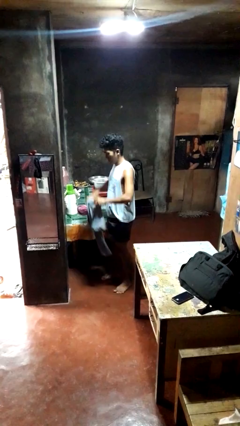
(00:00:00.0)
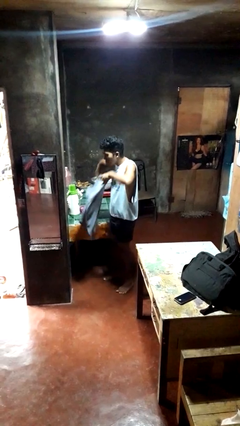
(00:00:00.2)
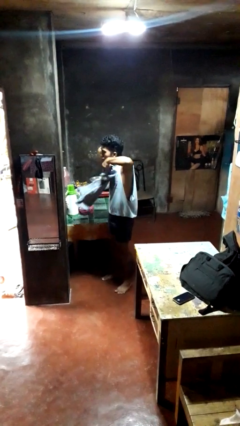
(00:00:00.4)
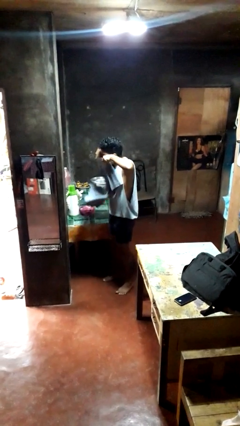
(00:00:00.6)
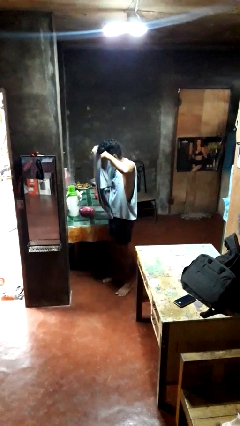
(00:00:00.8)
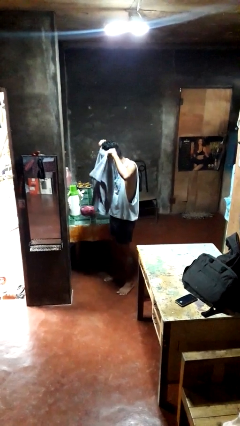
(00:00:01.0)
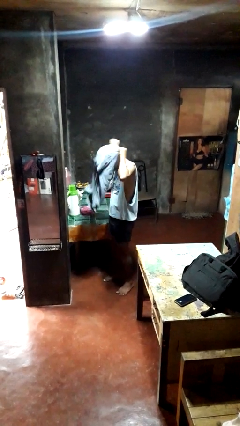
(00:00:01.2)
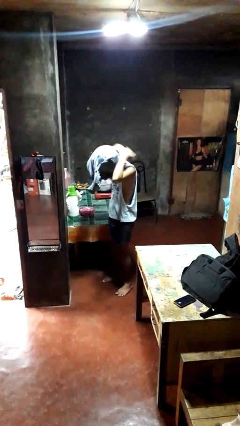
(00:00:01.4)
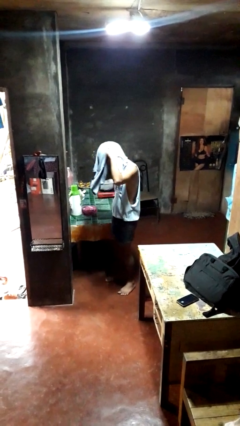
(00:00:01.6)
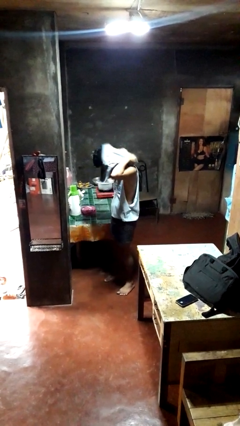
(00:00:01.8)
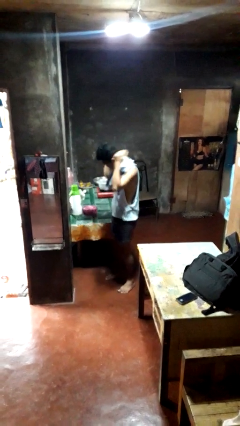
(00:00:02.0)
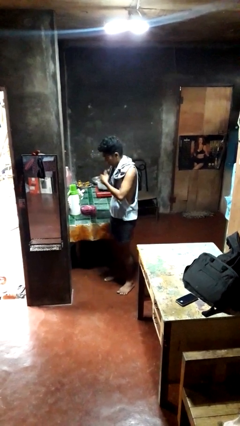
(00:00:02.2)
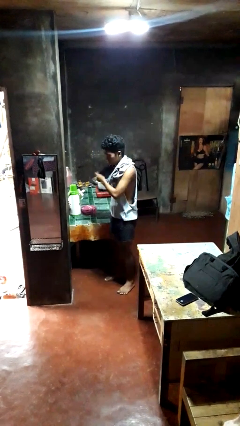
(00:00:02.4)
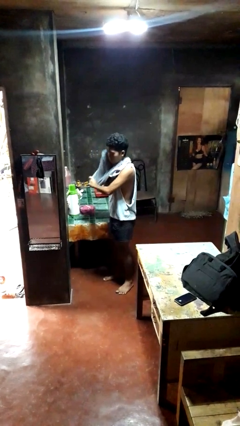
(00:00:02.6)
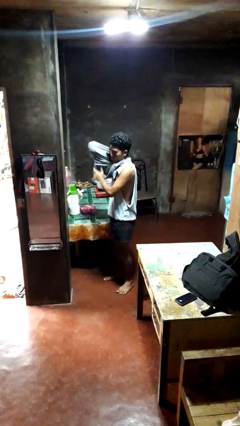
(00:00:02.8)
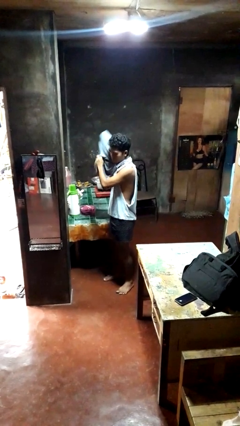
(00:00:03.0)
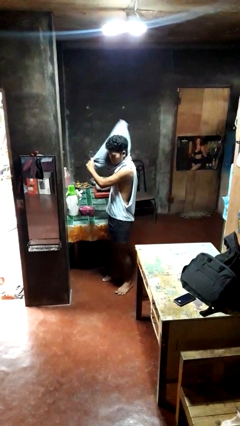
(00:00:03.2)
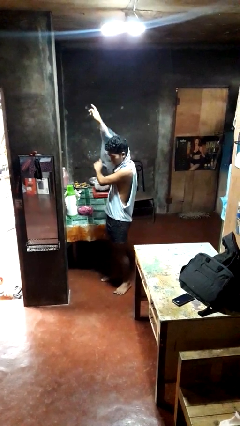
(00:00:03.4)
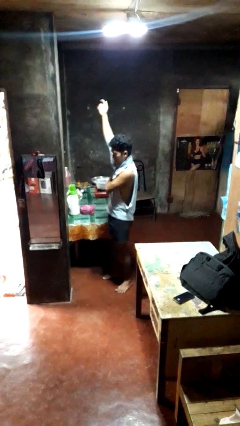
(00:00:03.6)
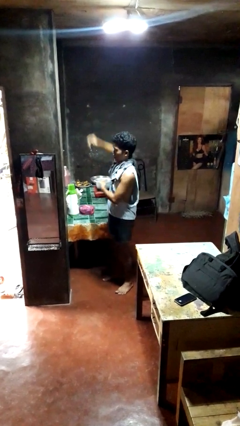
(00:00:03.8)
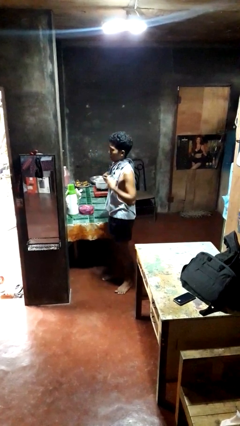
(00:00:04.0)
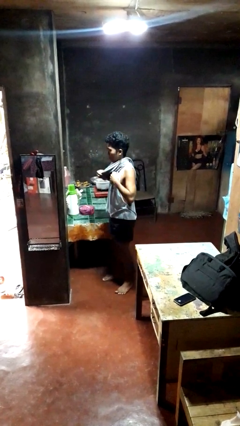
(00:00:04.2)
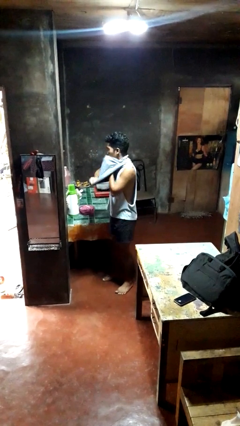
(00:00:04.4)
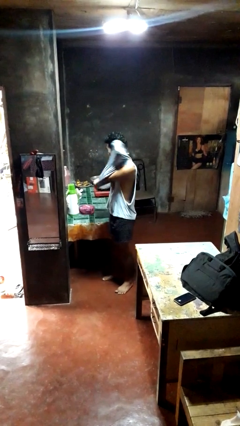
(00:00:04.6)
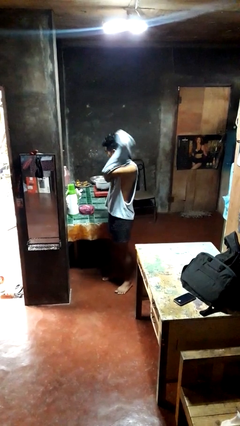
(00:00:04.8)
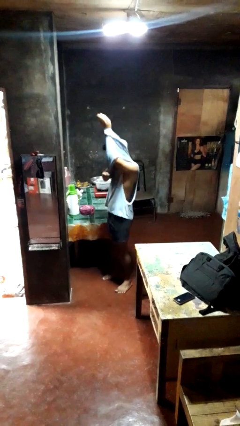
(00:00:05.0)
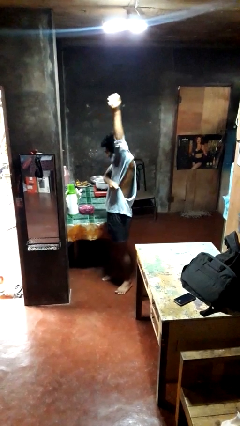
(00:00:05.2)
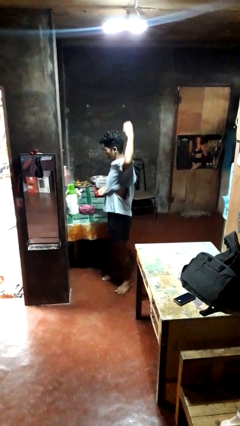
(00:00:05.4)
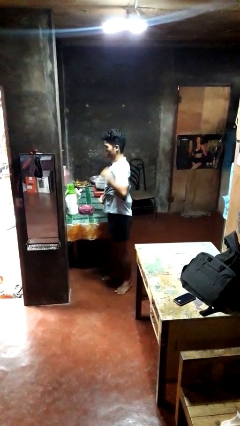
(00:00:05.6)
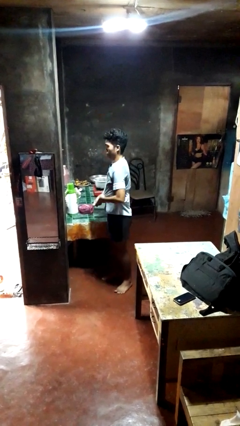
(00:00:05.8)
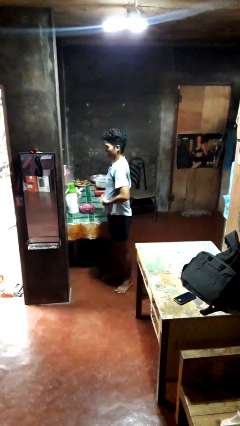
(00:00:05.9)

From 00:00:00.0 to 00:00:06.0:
person puts on shirt

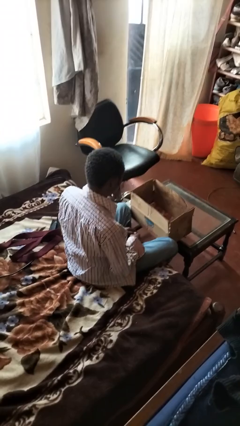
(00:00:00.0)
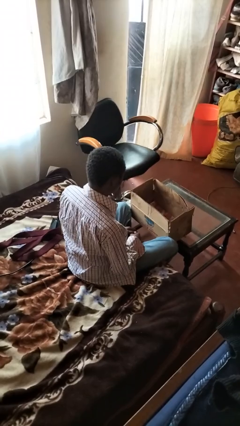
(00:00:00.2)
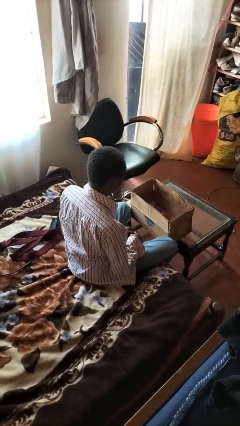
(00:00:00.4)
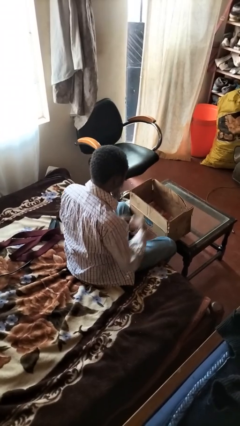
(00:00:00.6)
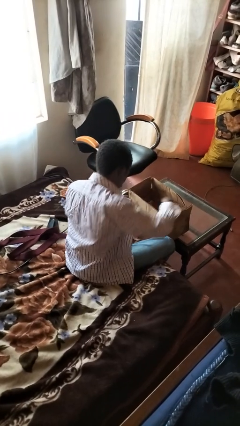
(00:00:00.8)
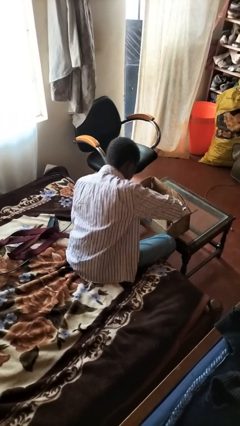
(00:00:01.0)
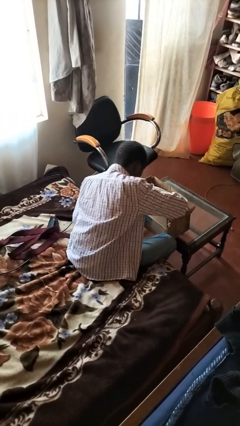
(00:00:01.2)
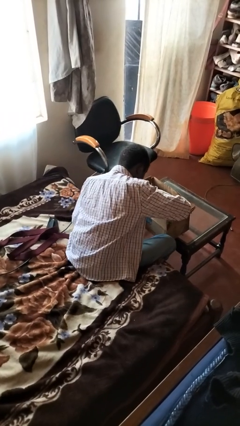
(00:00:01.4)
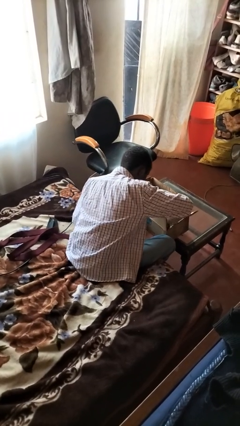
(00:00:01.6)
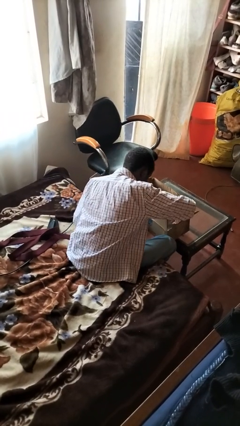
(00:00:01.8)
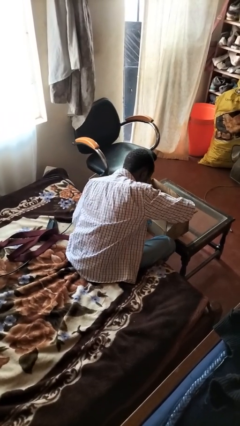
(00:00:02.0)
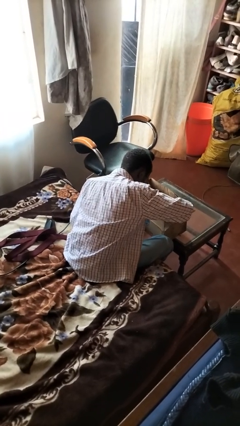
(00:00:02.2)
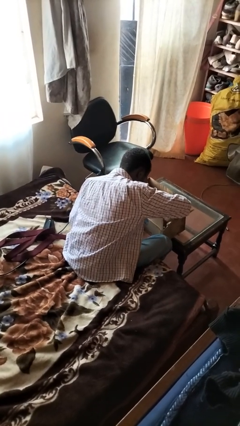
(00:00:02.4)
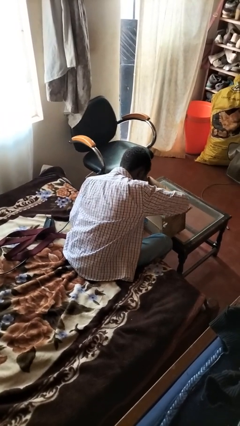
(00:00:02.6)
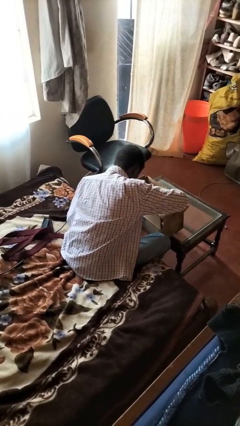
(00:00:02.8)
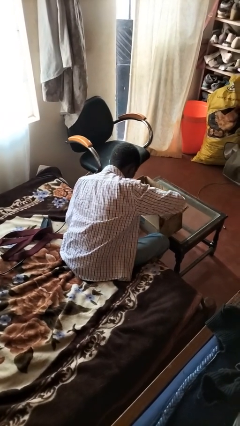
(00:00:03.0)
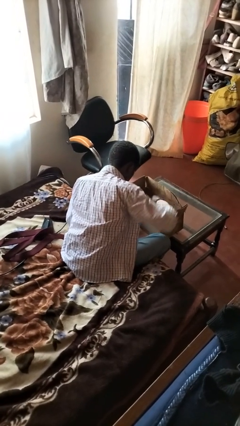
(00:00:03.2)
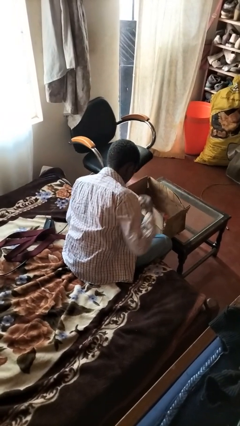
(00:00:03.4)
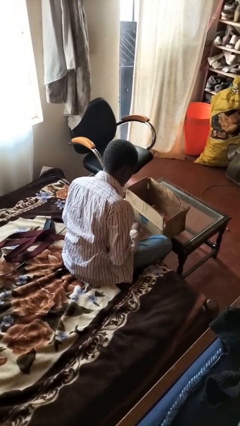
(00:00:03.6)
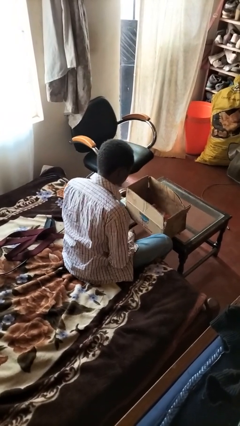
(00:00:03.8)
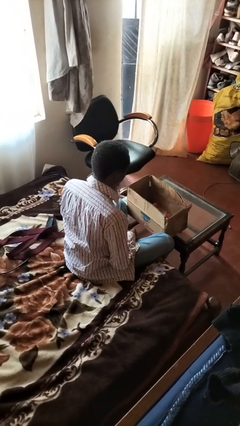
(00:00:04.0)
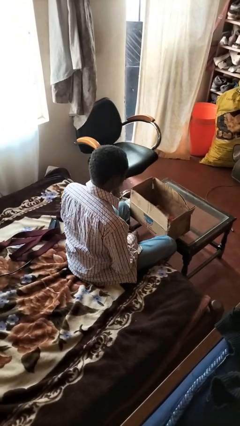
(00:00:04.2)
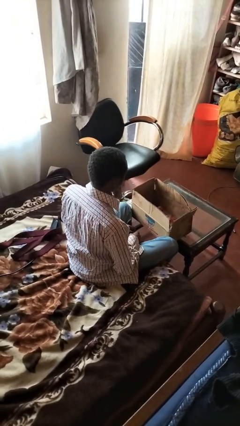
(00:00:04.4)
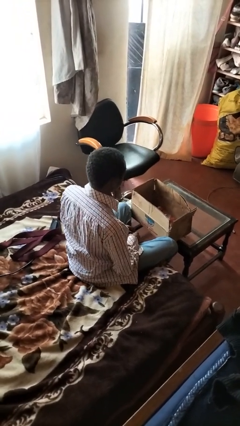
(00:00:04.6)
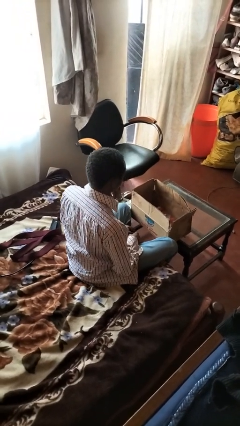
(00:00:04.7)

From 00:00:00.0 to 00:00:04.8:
person searches in box

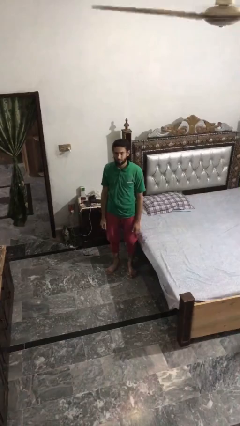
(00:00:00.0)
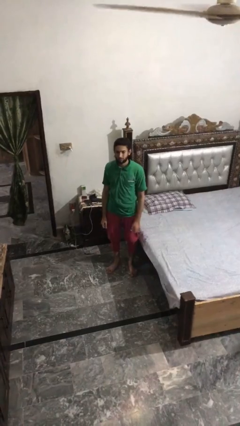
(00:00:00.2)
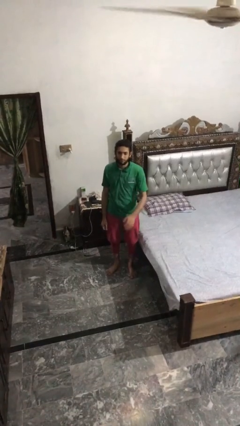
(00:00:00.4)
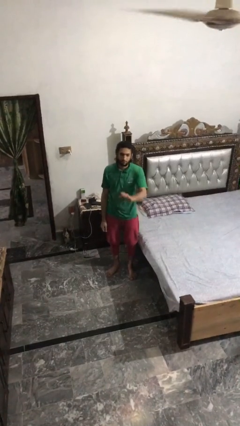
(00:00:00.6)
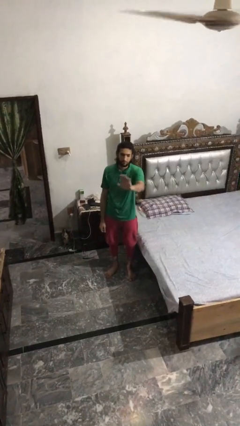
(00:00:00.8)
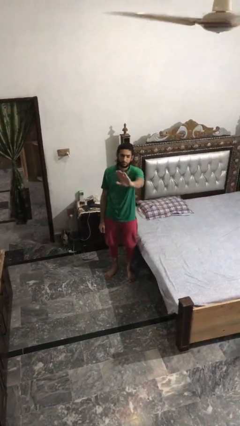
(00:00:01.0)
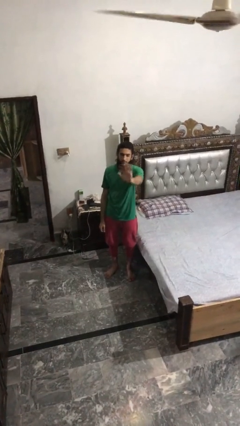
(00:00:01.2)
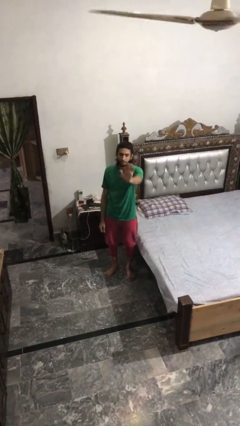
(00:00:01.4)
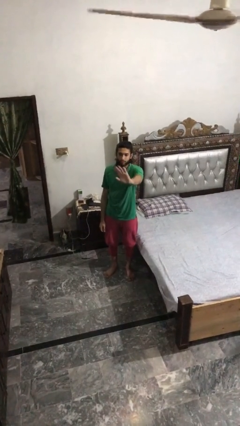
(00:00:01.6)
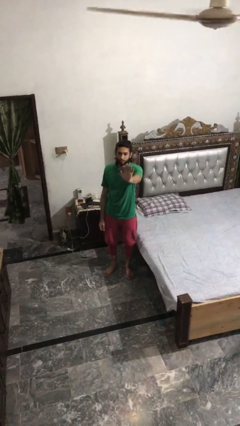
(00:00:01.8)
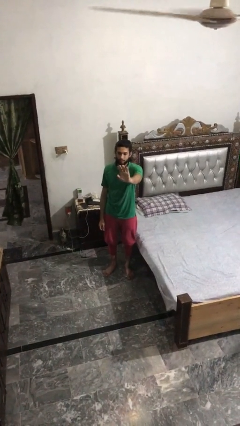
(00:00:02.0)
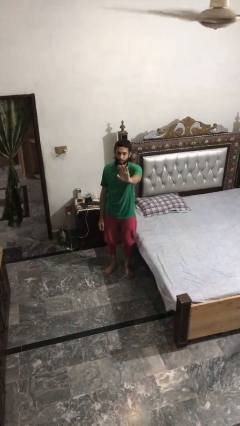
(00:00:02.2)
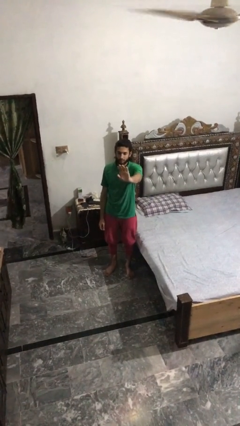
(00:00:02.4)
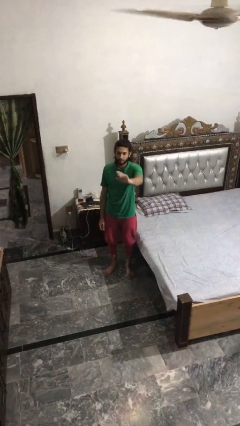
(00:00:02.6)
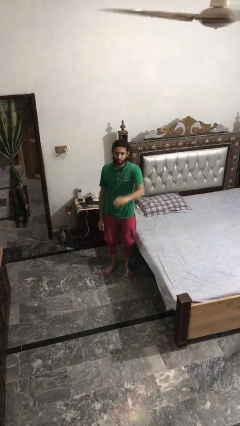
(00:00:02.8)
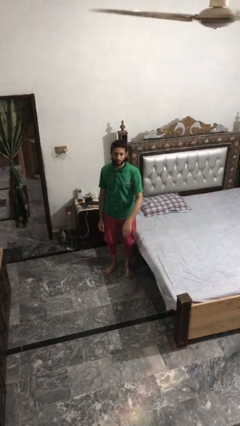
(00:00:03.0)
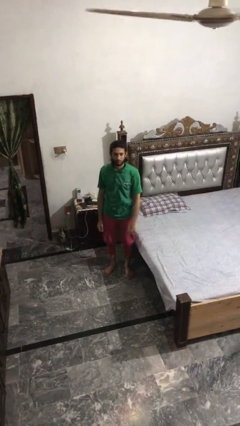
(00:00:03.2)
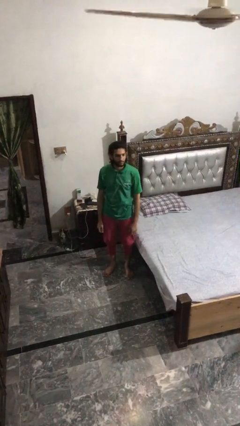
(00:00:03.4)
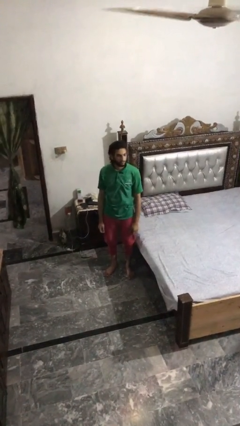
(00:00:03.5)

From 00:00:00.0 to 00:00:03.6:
person waves at person

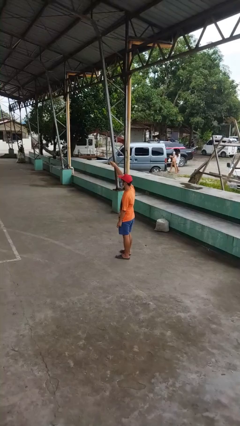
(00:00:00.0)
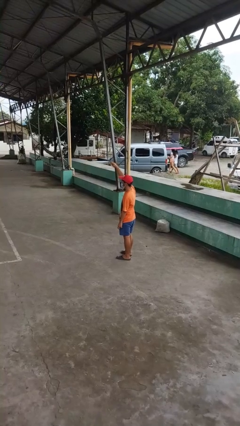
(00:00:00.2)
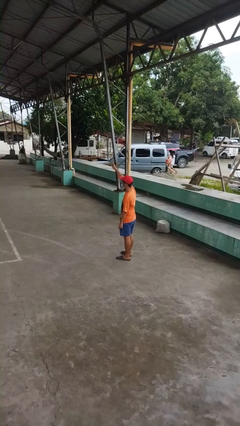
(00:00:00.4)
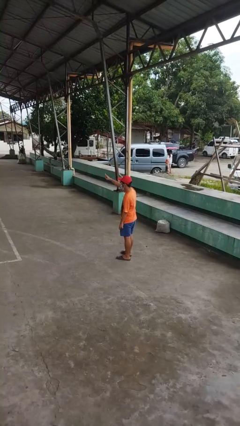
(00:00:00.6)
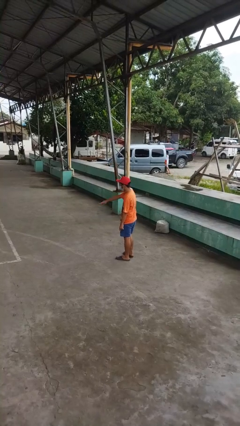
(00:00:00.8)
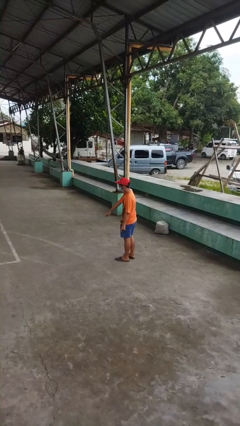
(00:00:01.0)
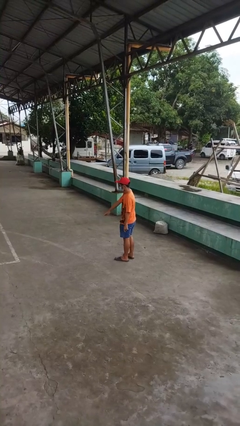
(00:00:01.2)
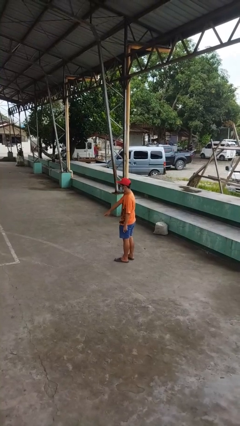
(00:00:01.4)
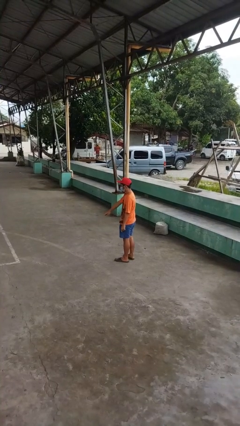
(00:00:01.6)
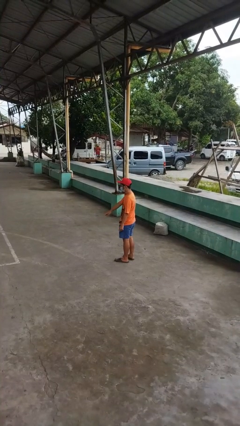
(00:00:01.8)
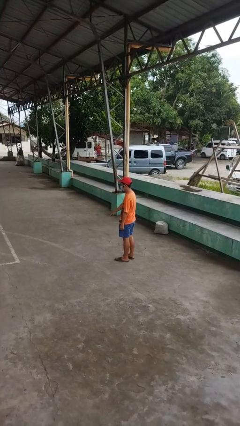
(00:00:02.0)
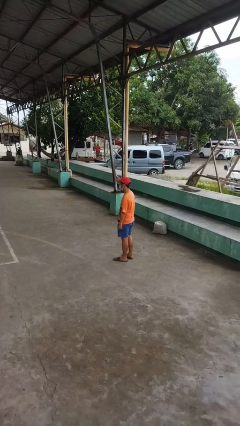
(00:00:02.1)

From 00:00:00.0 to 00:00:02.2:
person gestures swipe down

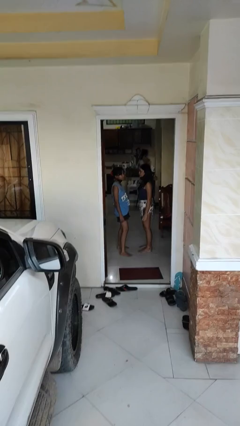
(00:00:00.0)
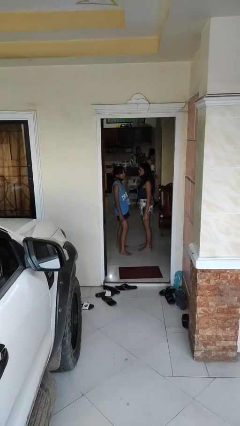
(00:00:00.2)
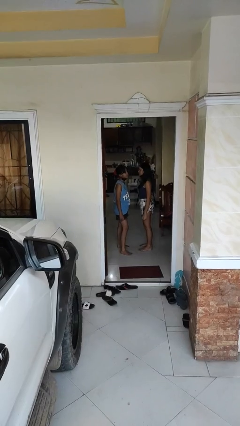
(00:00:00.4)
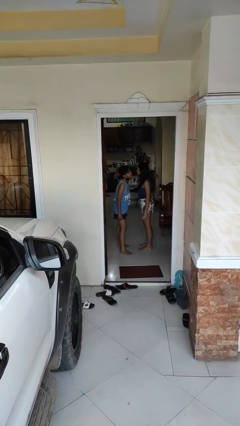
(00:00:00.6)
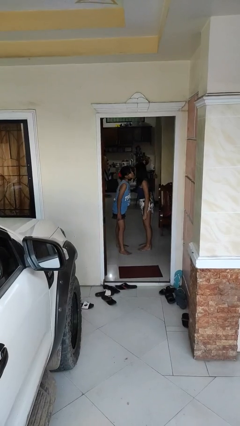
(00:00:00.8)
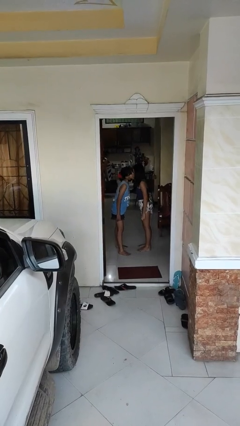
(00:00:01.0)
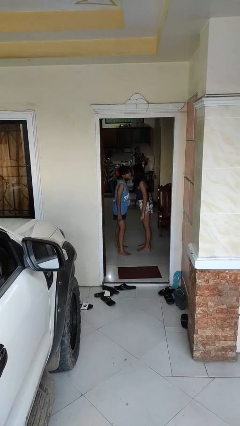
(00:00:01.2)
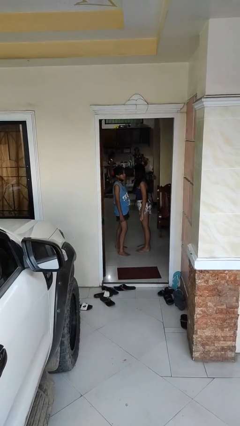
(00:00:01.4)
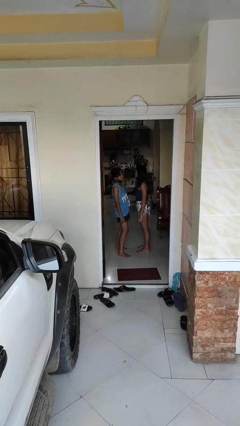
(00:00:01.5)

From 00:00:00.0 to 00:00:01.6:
person kisses cheek of person
